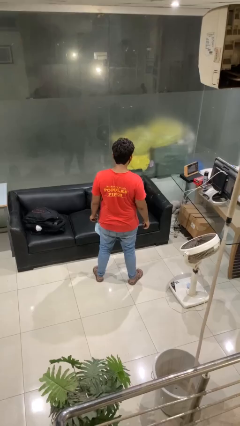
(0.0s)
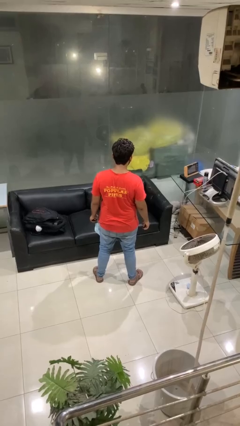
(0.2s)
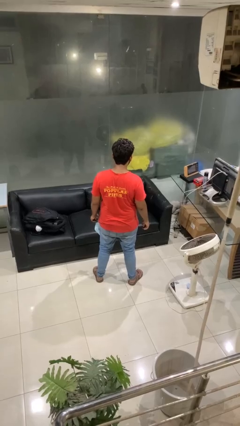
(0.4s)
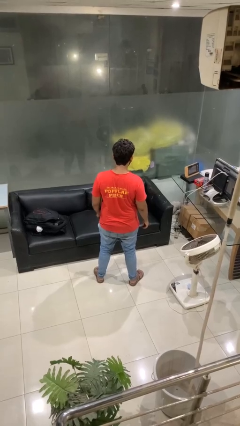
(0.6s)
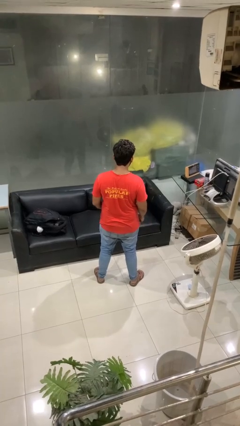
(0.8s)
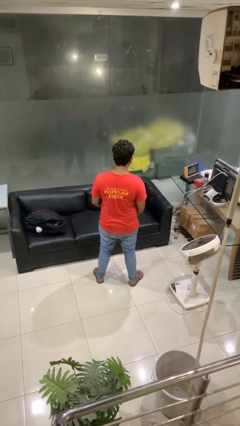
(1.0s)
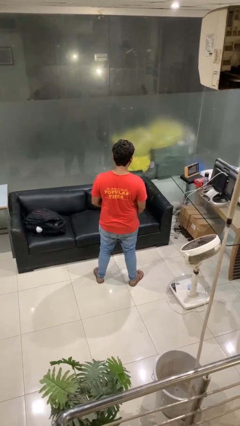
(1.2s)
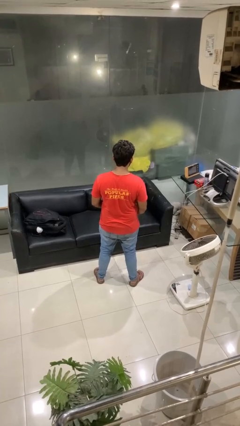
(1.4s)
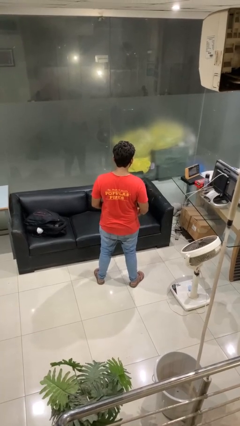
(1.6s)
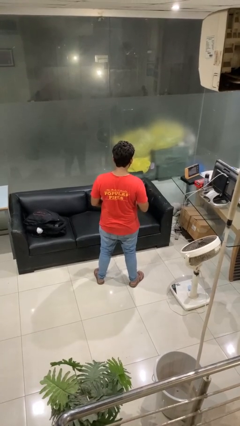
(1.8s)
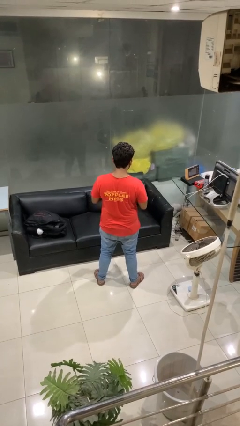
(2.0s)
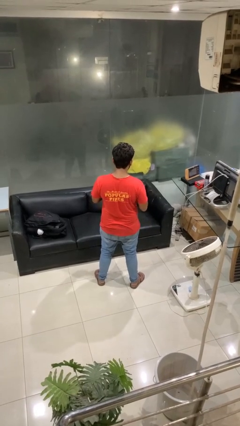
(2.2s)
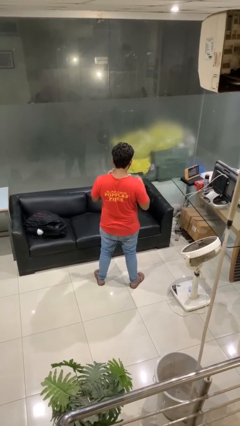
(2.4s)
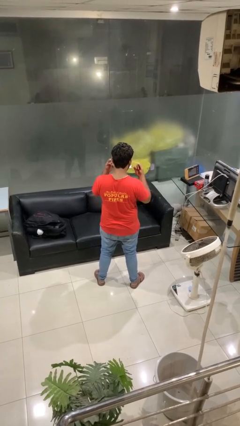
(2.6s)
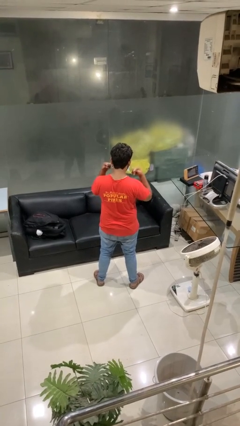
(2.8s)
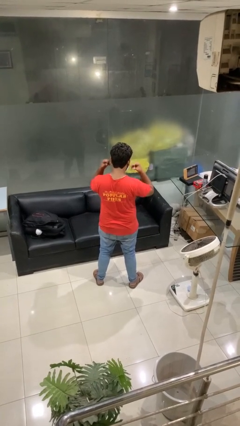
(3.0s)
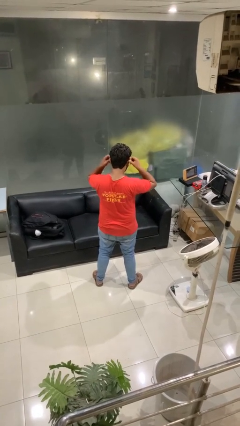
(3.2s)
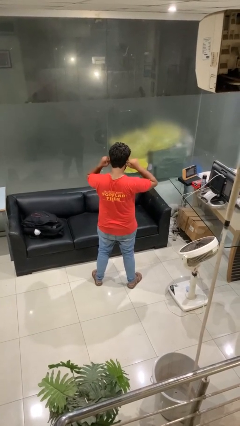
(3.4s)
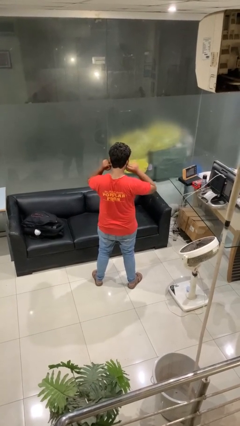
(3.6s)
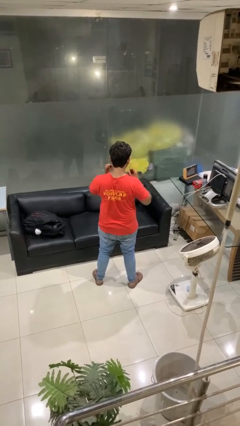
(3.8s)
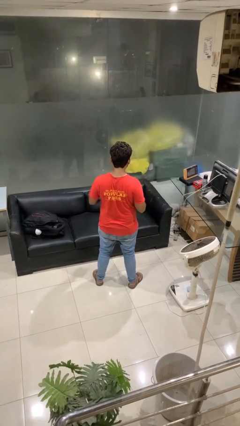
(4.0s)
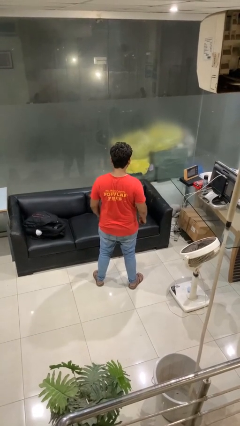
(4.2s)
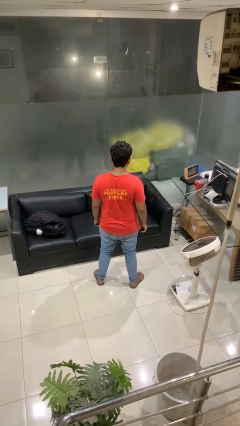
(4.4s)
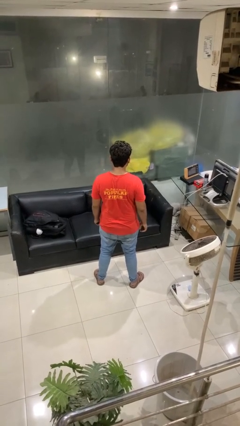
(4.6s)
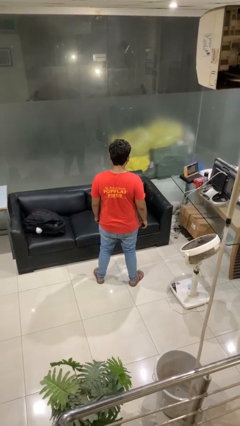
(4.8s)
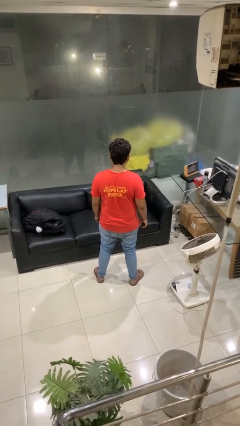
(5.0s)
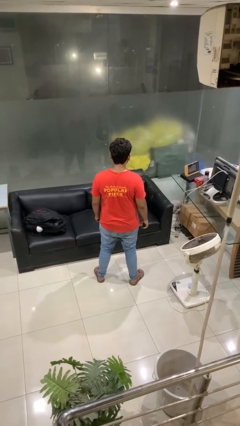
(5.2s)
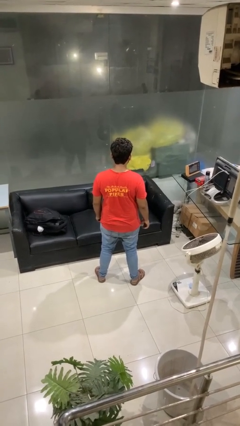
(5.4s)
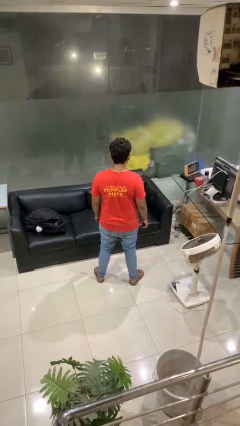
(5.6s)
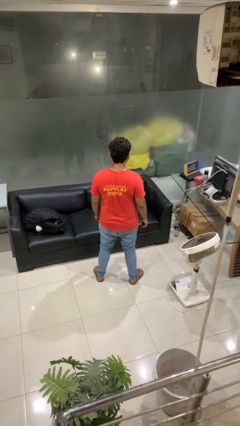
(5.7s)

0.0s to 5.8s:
person puts on facemask

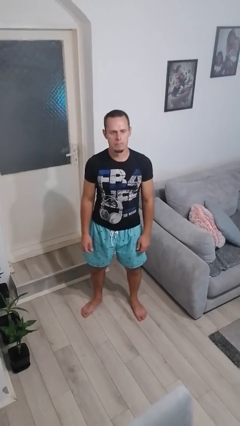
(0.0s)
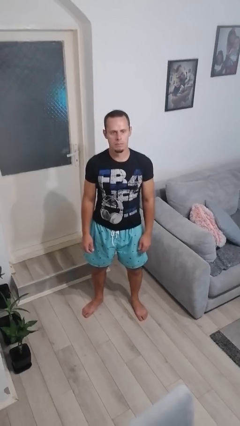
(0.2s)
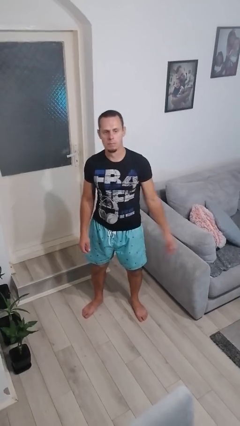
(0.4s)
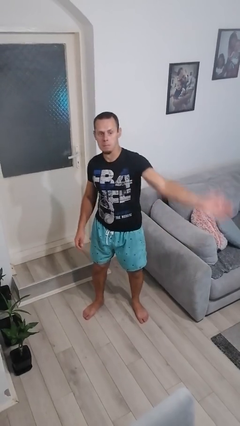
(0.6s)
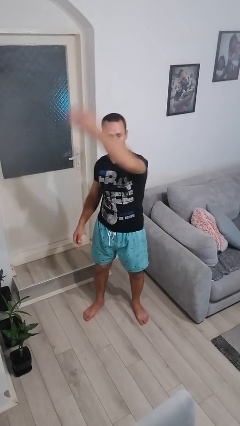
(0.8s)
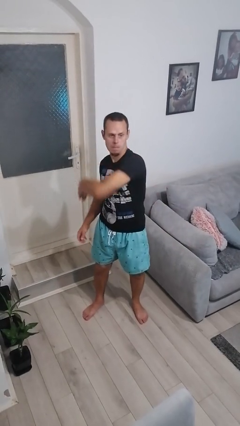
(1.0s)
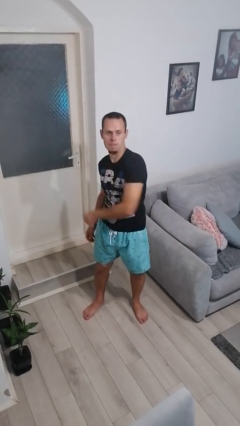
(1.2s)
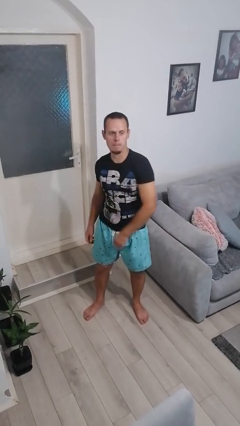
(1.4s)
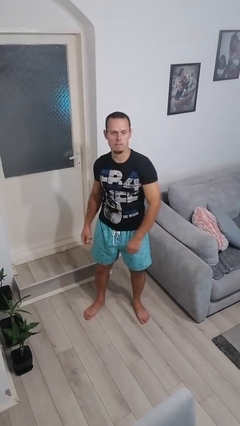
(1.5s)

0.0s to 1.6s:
person punches

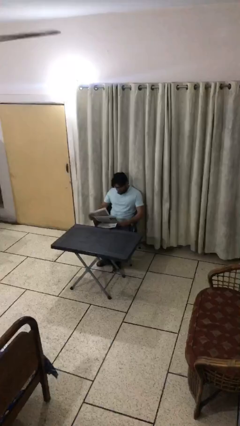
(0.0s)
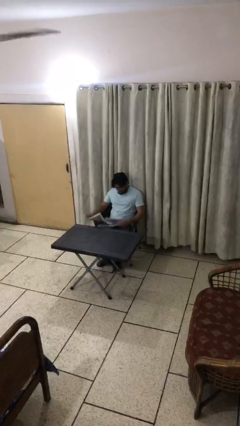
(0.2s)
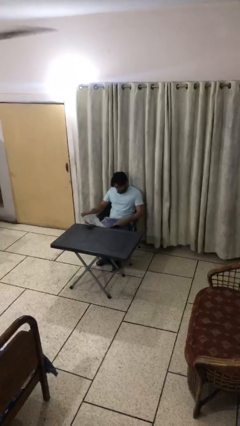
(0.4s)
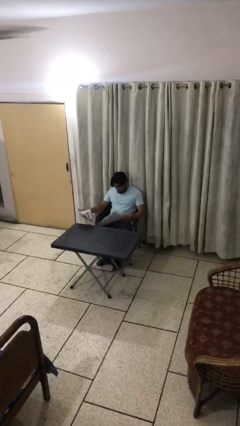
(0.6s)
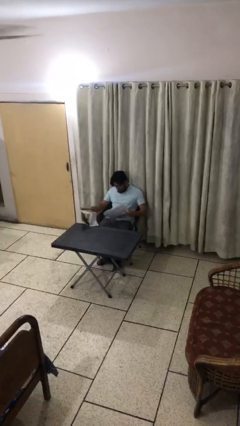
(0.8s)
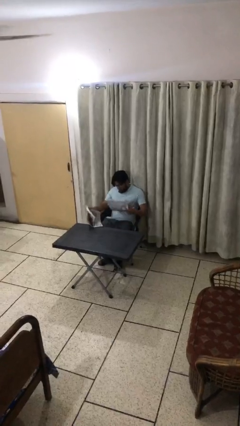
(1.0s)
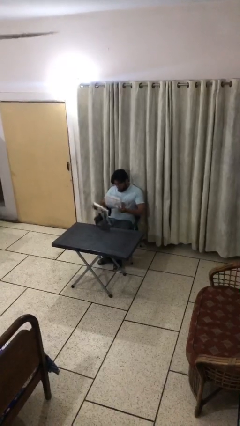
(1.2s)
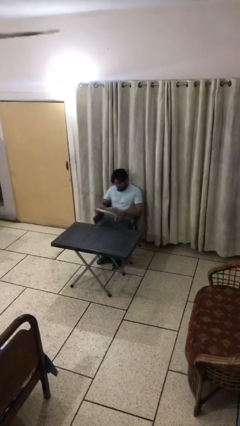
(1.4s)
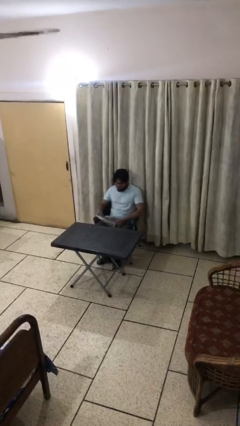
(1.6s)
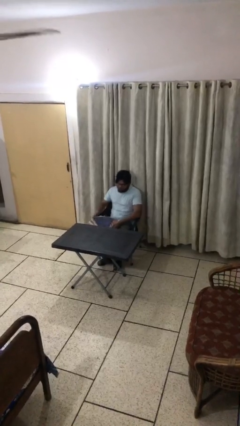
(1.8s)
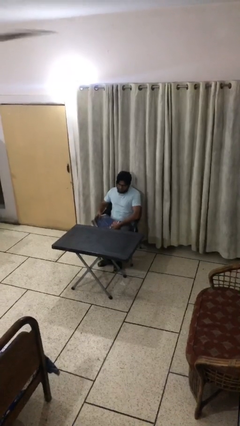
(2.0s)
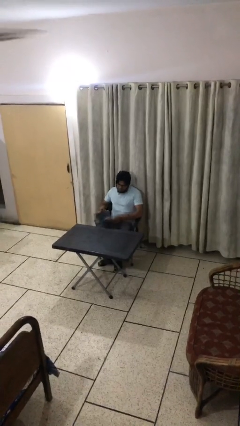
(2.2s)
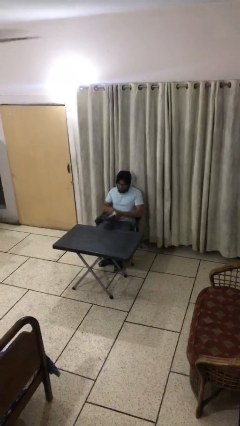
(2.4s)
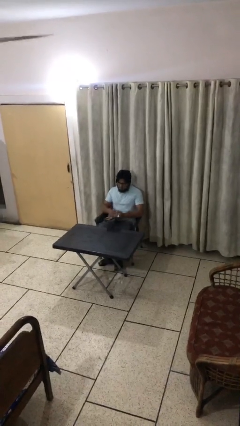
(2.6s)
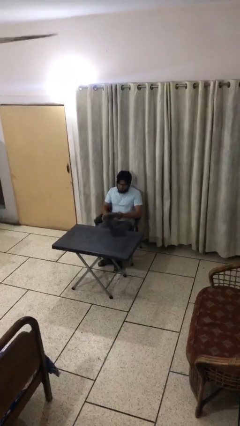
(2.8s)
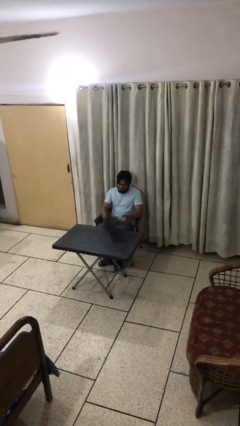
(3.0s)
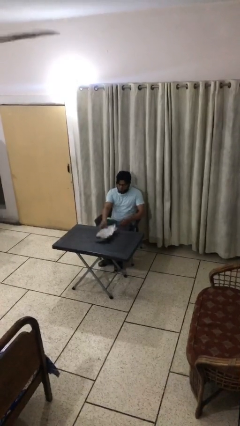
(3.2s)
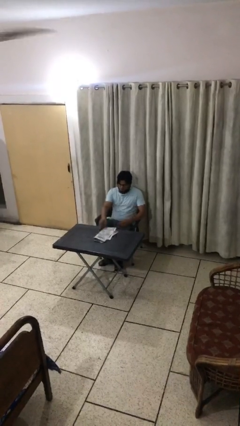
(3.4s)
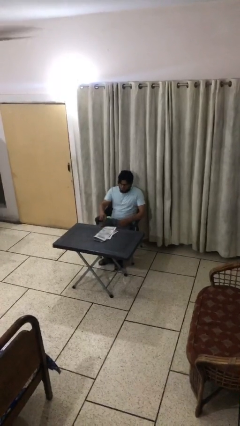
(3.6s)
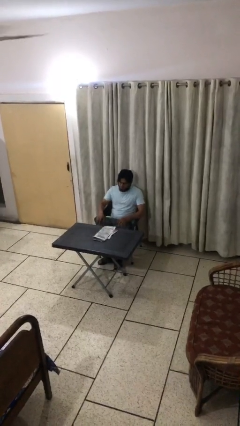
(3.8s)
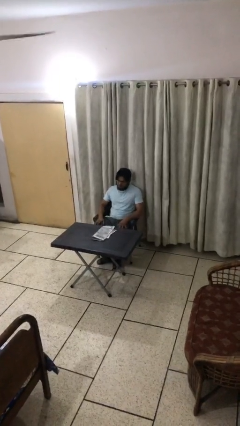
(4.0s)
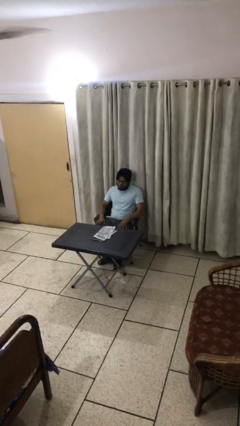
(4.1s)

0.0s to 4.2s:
person puts down object on table

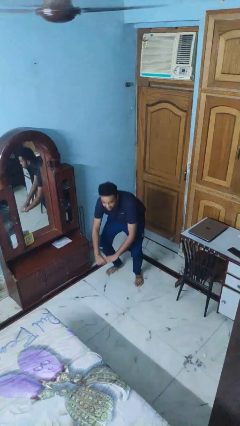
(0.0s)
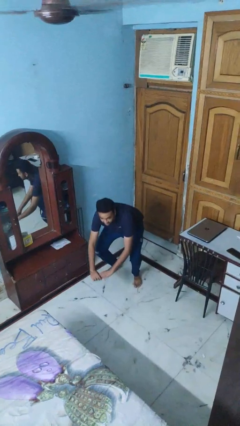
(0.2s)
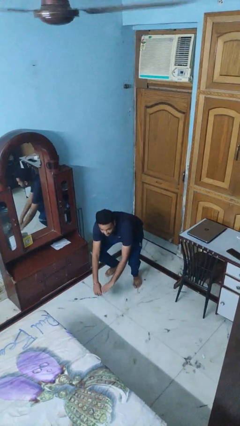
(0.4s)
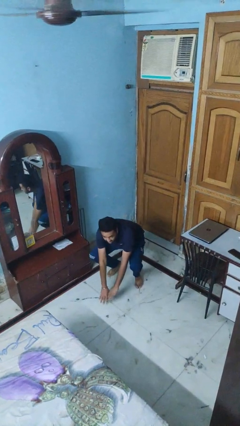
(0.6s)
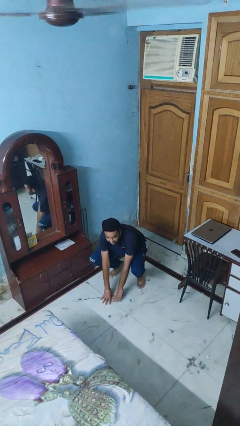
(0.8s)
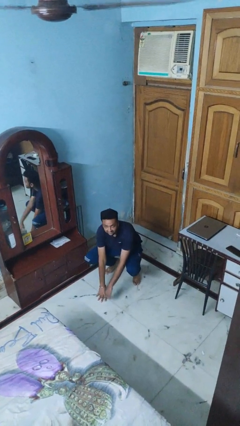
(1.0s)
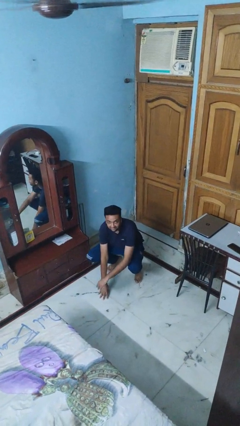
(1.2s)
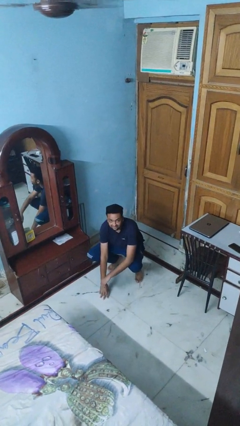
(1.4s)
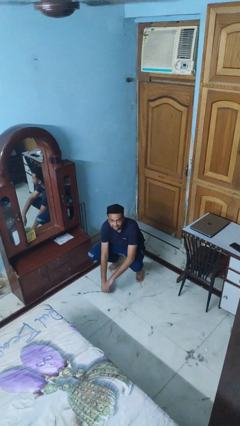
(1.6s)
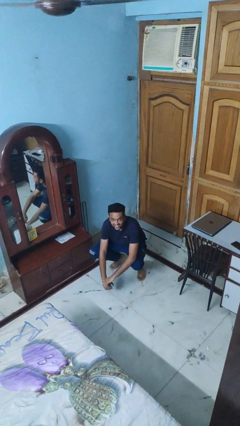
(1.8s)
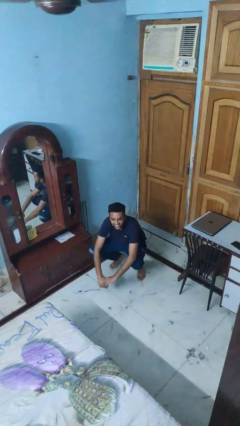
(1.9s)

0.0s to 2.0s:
person squats

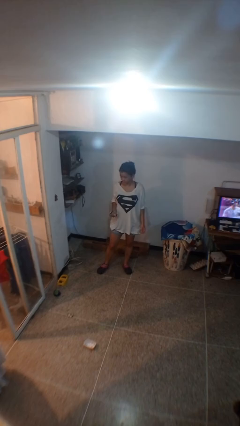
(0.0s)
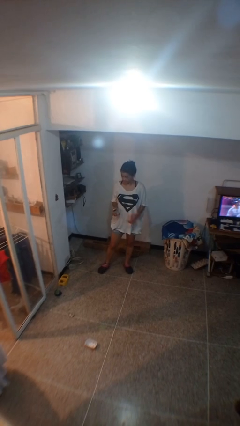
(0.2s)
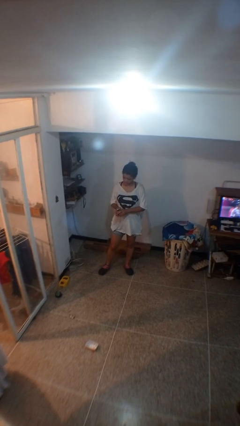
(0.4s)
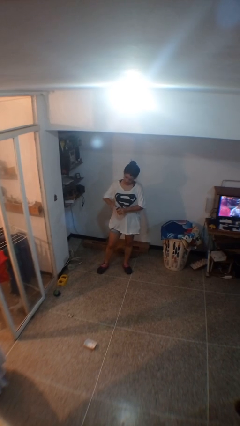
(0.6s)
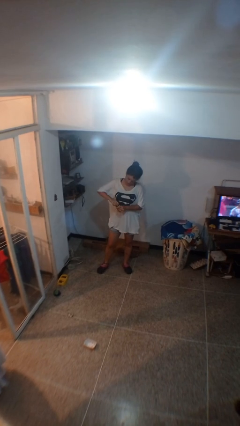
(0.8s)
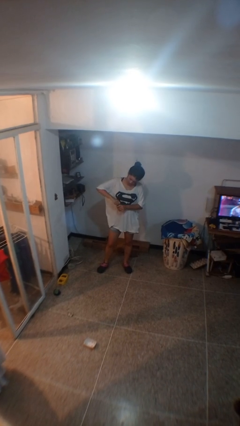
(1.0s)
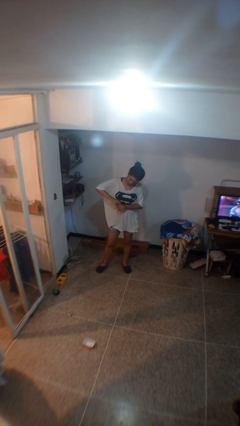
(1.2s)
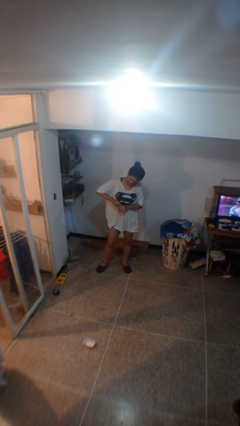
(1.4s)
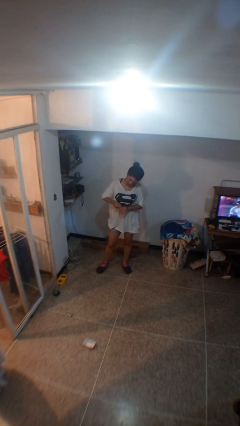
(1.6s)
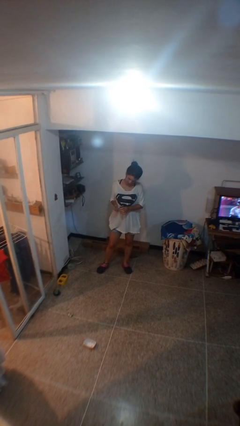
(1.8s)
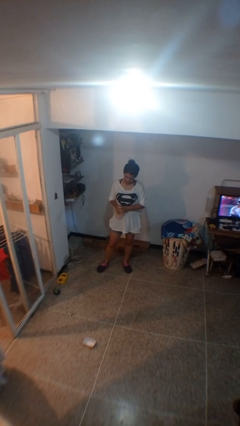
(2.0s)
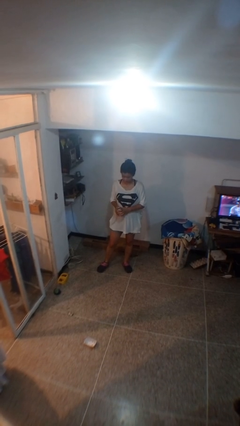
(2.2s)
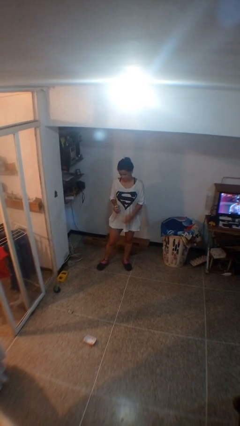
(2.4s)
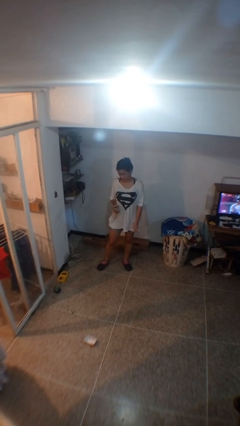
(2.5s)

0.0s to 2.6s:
person opens beverage can

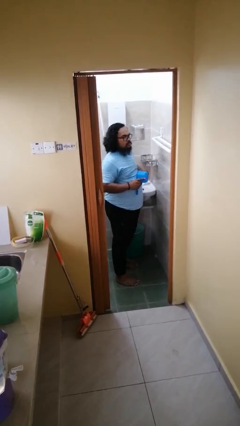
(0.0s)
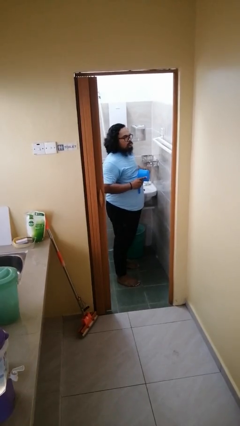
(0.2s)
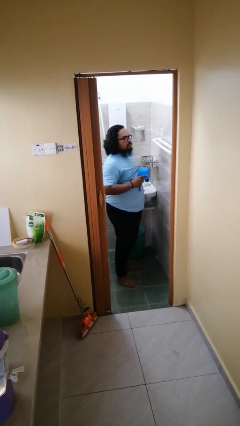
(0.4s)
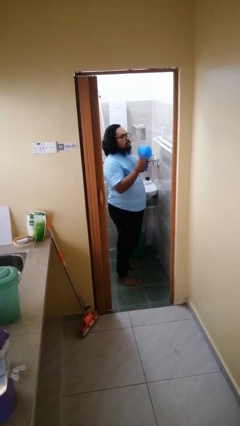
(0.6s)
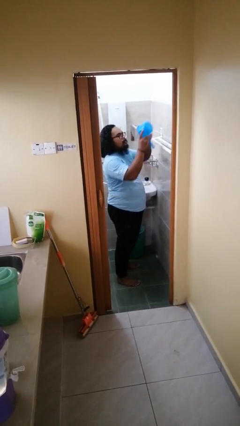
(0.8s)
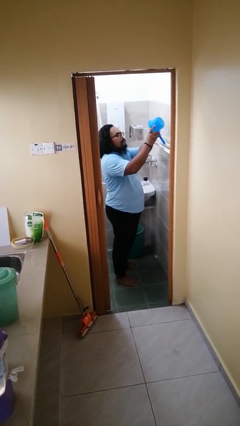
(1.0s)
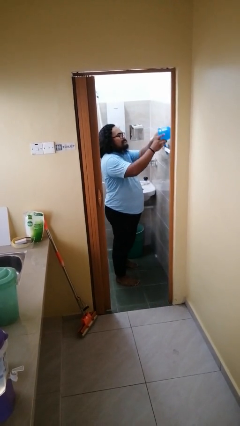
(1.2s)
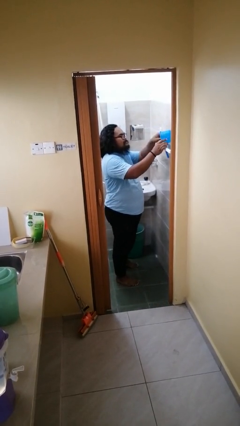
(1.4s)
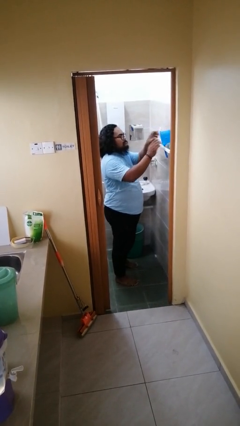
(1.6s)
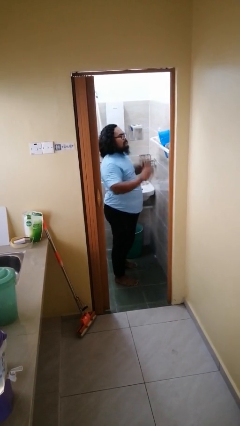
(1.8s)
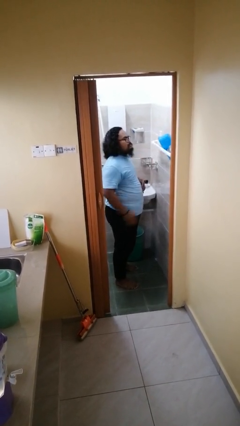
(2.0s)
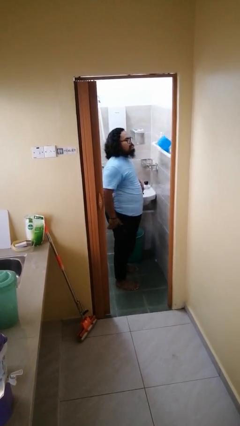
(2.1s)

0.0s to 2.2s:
person puts down object on countertop
